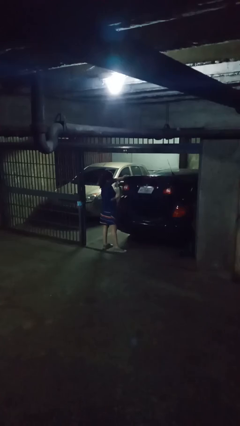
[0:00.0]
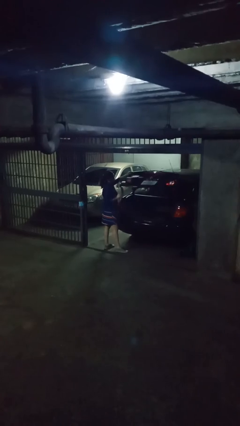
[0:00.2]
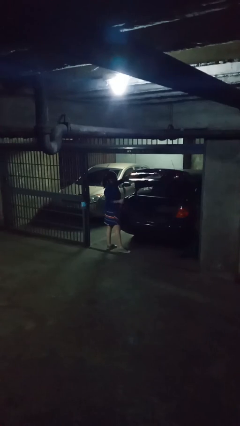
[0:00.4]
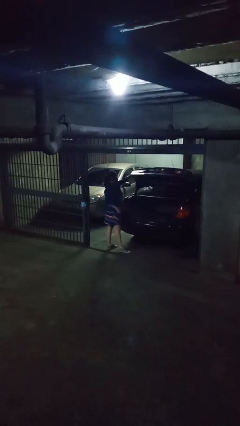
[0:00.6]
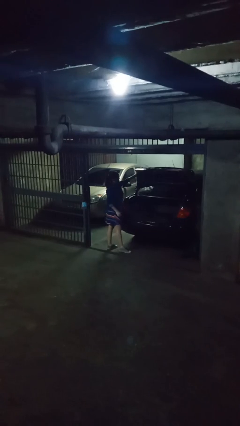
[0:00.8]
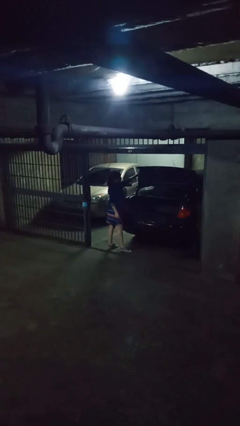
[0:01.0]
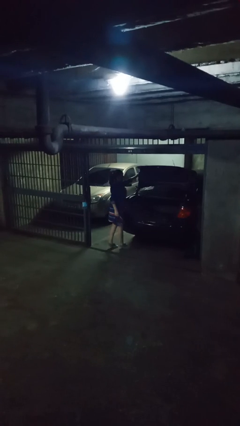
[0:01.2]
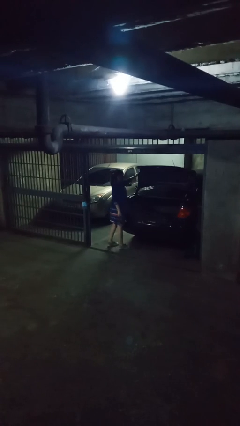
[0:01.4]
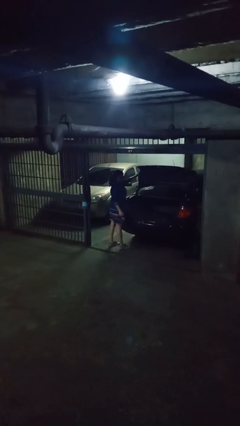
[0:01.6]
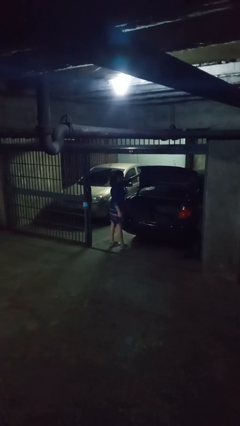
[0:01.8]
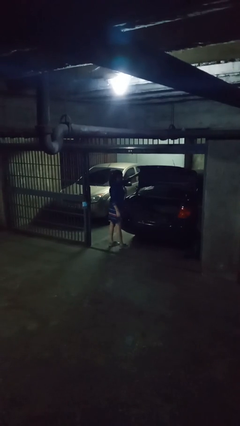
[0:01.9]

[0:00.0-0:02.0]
person opens car trunk

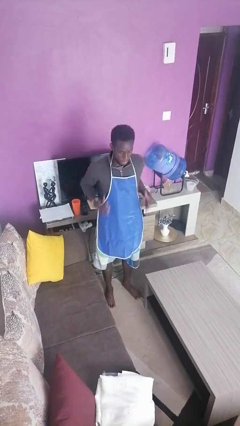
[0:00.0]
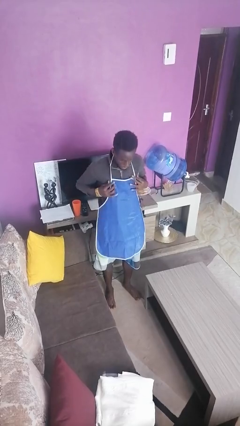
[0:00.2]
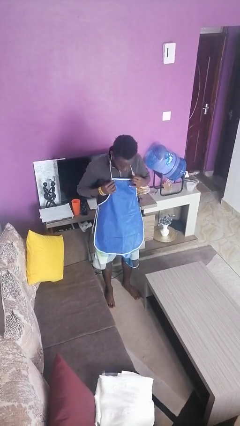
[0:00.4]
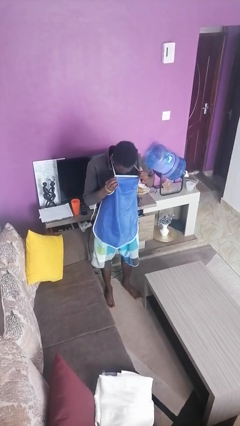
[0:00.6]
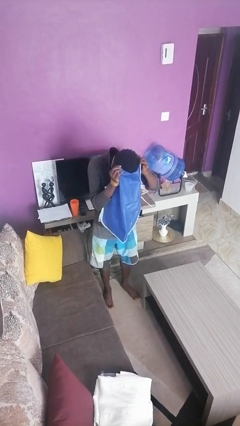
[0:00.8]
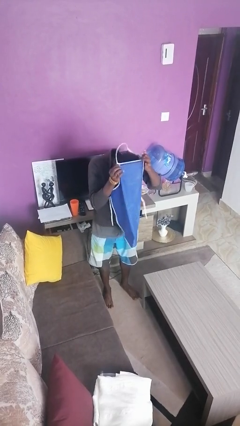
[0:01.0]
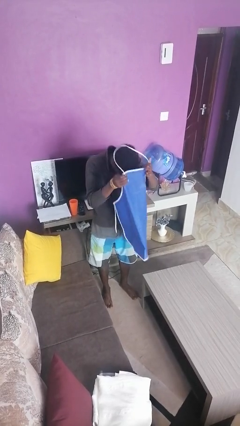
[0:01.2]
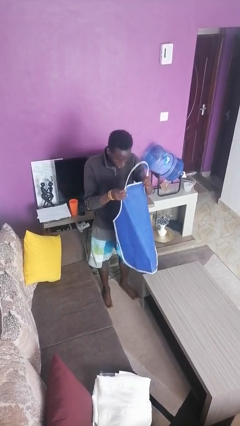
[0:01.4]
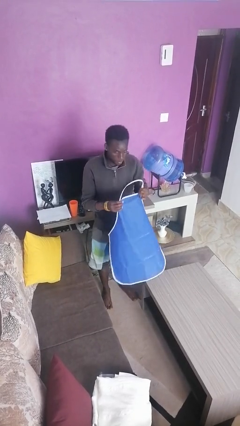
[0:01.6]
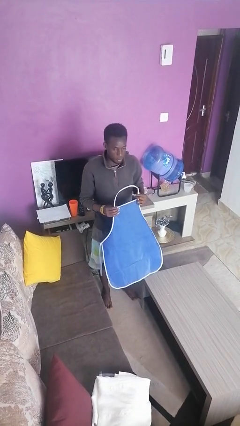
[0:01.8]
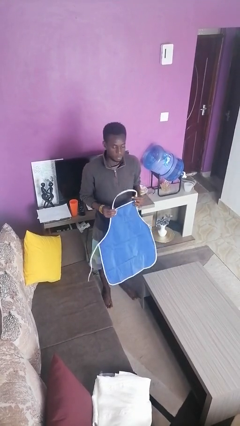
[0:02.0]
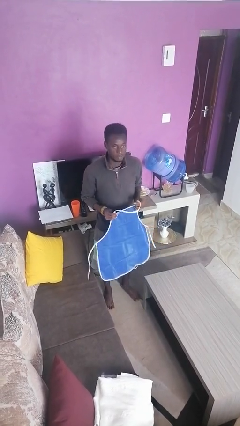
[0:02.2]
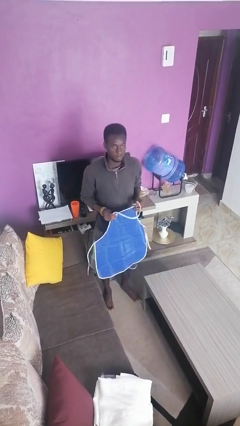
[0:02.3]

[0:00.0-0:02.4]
person takes off apron

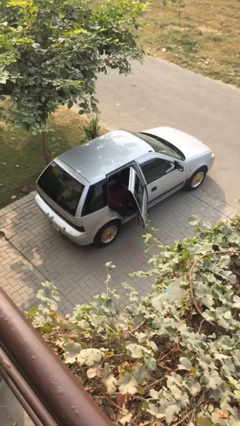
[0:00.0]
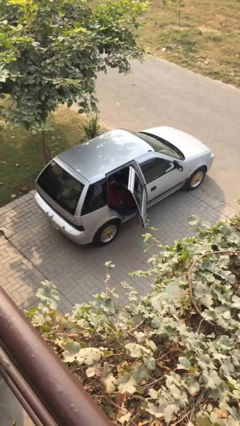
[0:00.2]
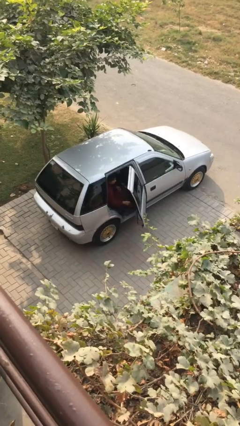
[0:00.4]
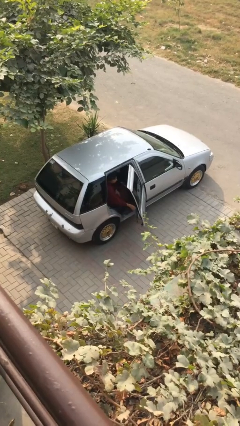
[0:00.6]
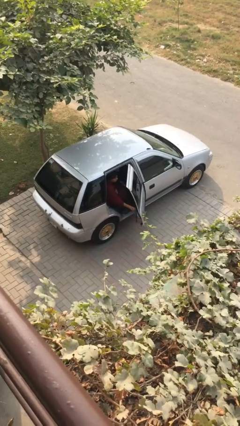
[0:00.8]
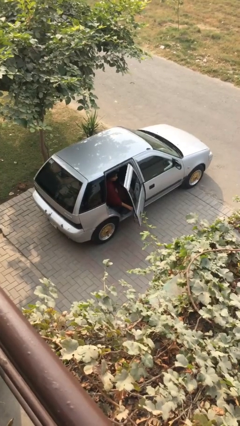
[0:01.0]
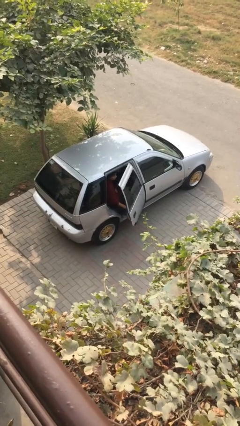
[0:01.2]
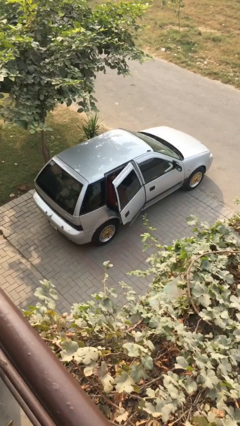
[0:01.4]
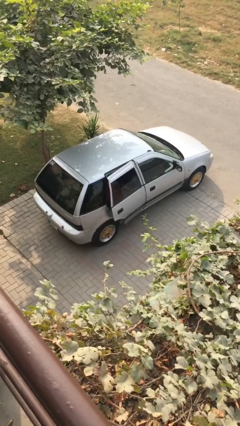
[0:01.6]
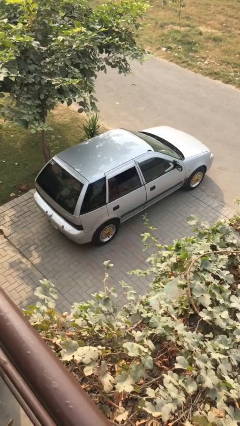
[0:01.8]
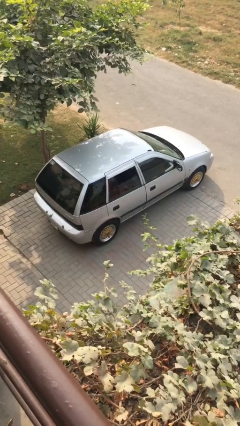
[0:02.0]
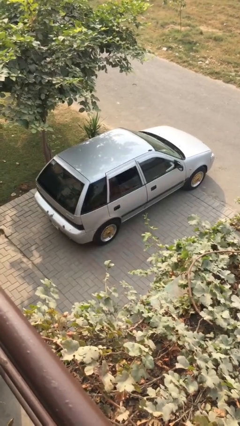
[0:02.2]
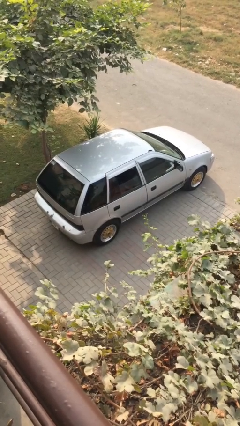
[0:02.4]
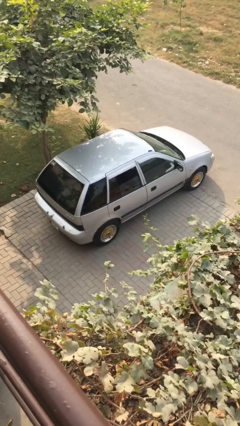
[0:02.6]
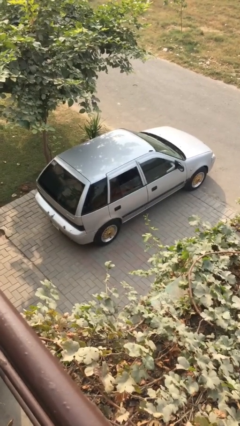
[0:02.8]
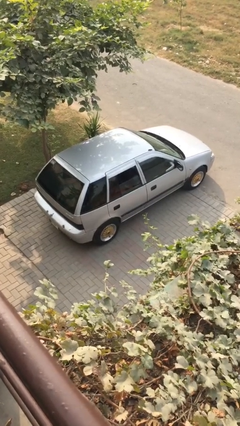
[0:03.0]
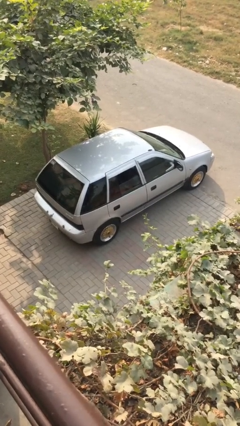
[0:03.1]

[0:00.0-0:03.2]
person closes car door

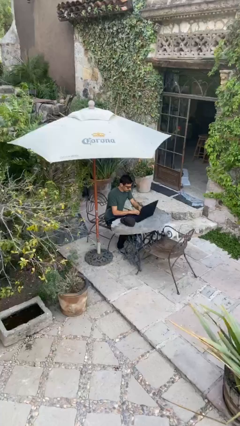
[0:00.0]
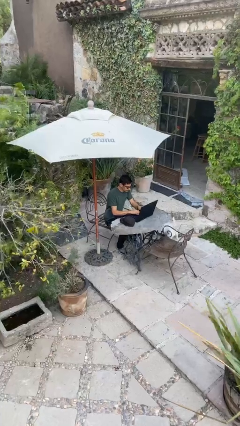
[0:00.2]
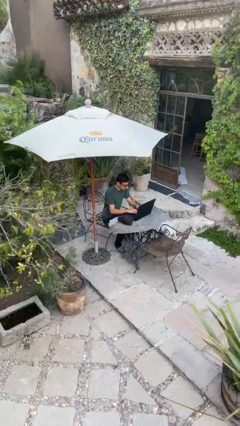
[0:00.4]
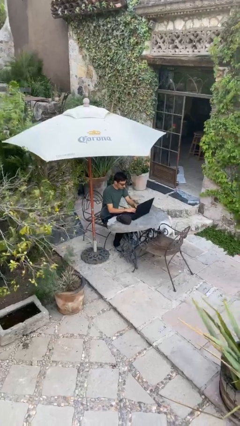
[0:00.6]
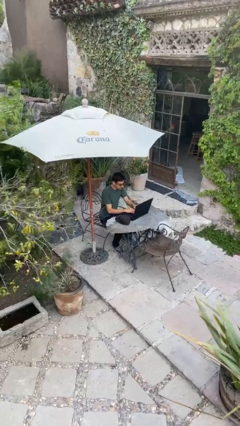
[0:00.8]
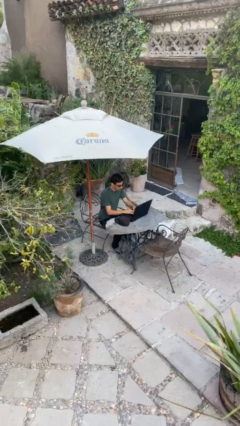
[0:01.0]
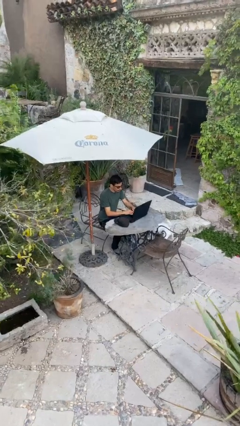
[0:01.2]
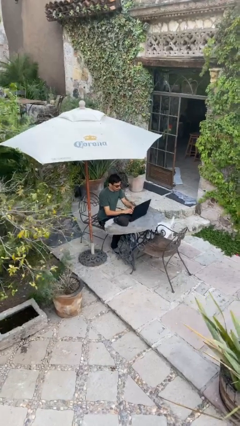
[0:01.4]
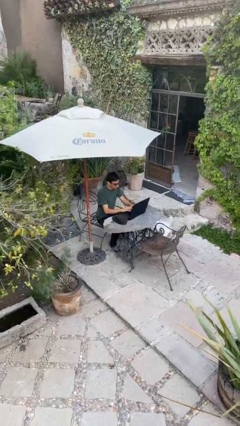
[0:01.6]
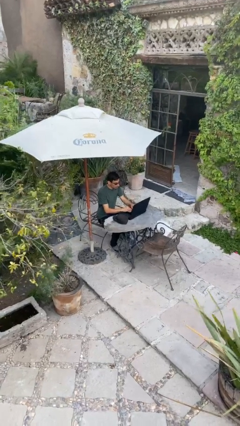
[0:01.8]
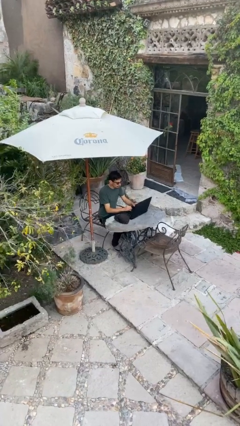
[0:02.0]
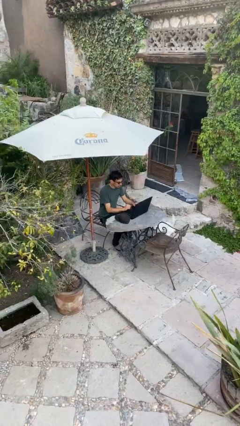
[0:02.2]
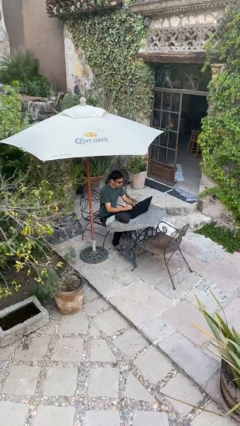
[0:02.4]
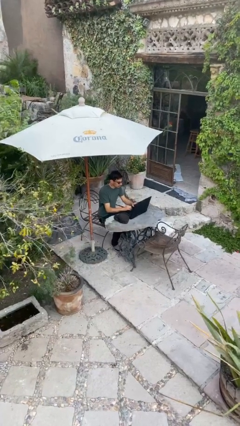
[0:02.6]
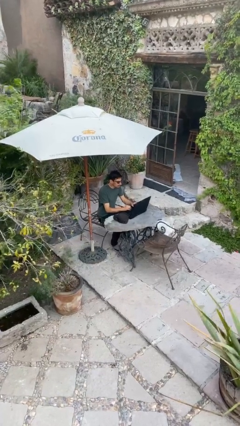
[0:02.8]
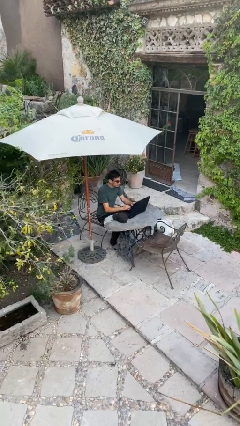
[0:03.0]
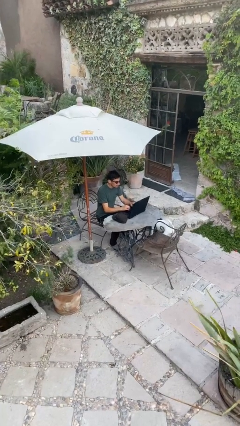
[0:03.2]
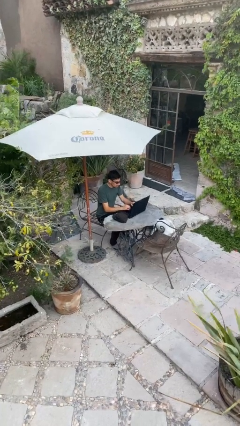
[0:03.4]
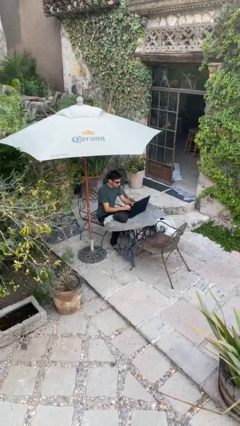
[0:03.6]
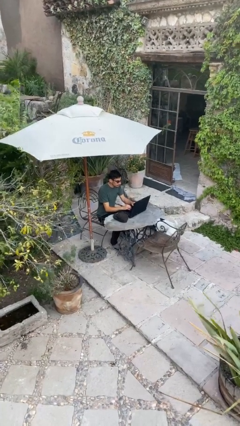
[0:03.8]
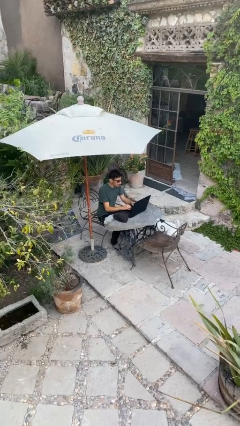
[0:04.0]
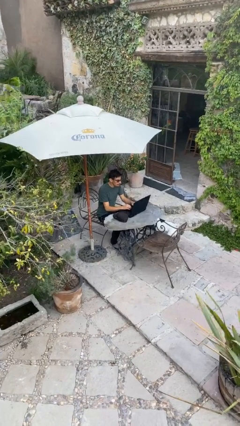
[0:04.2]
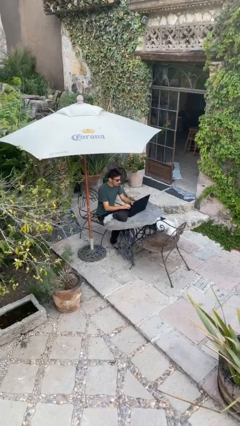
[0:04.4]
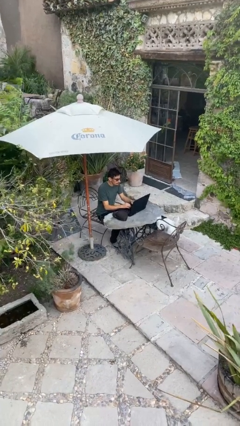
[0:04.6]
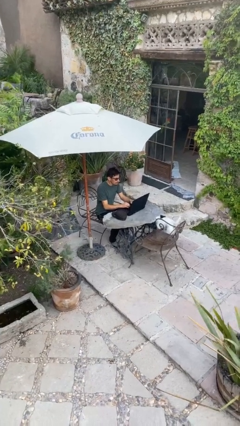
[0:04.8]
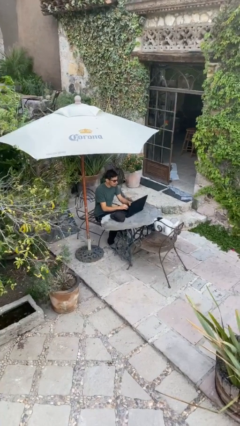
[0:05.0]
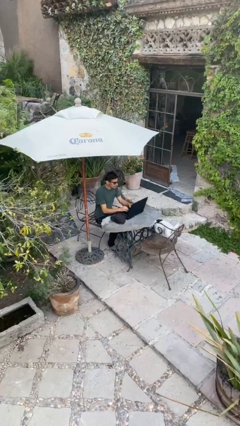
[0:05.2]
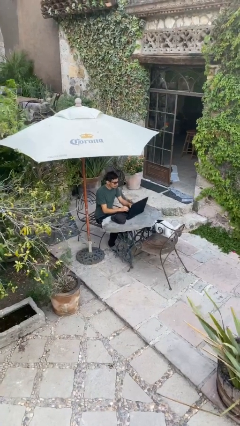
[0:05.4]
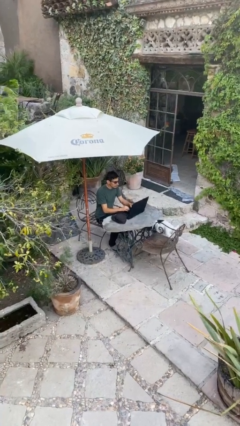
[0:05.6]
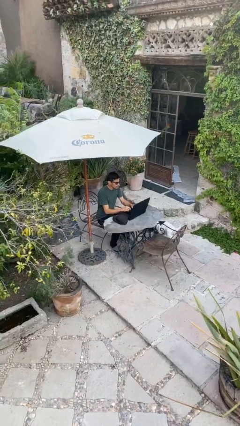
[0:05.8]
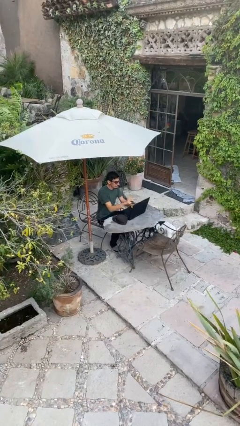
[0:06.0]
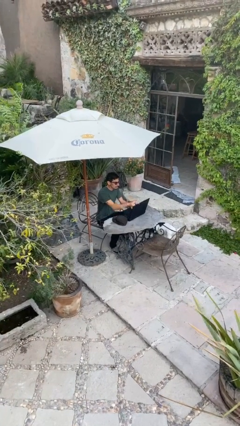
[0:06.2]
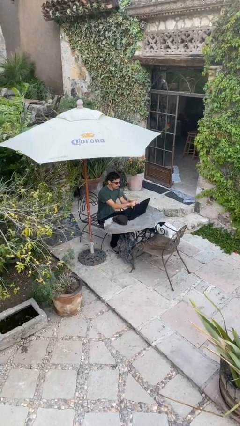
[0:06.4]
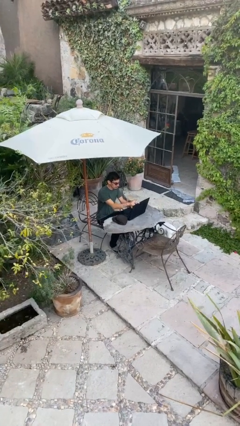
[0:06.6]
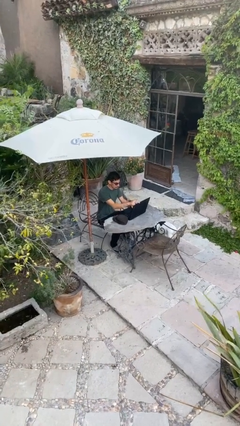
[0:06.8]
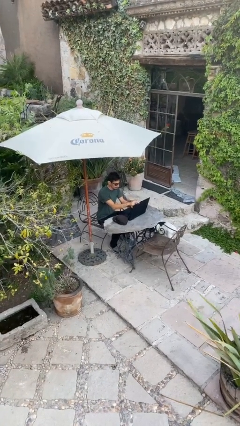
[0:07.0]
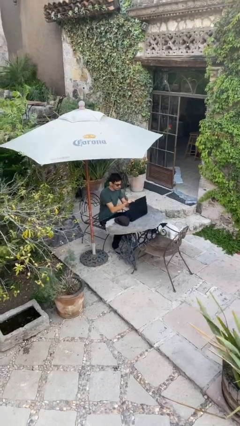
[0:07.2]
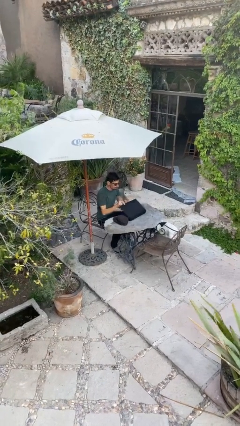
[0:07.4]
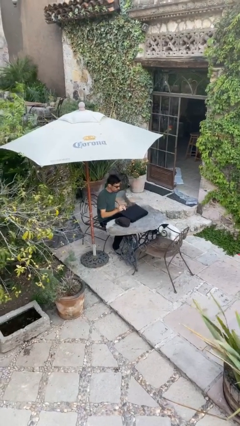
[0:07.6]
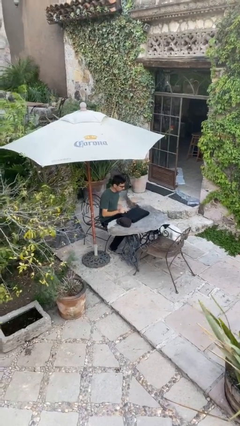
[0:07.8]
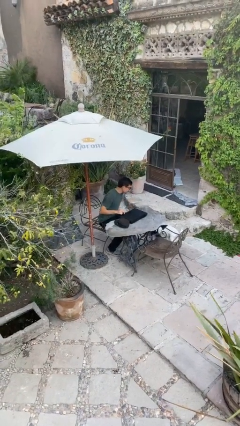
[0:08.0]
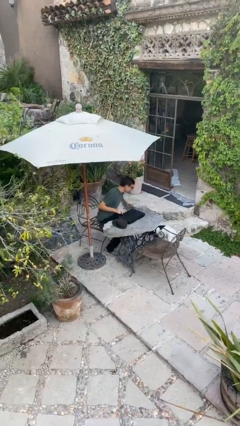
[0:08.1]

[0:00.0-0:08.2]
person interacts with laptop

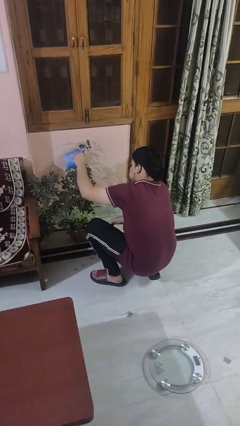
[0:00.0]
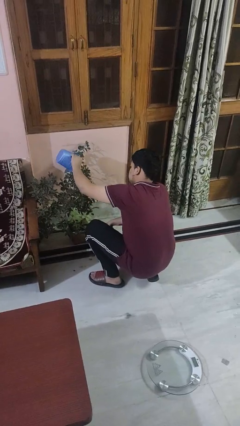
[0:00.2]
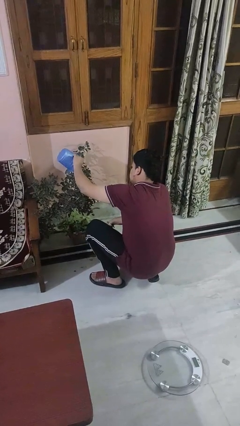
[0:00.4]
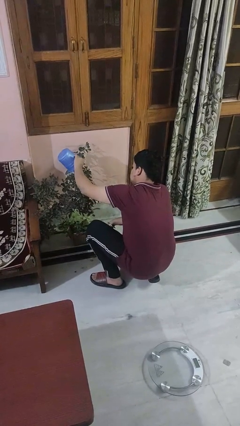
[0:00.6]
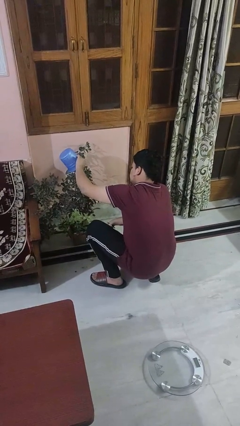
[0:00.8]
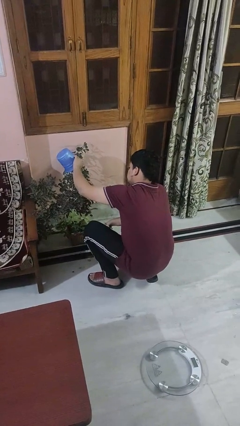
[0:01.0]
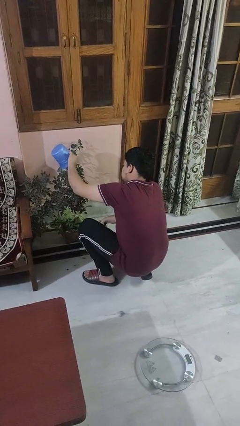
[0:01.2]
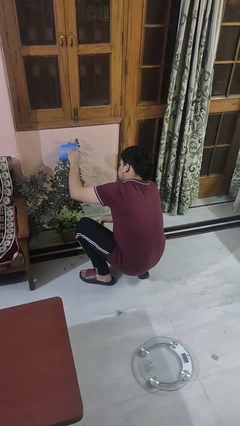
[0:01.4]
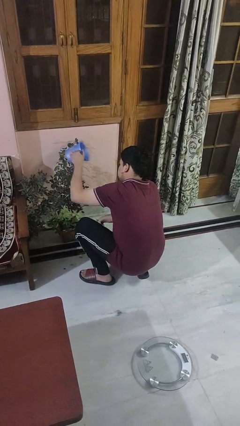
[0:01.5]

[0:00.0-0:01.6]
person waters houseplant
